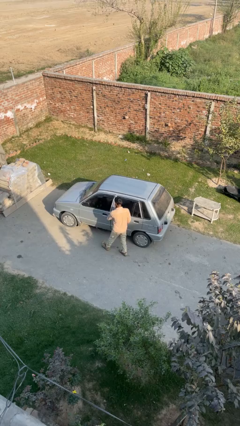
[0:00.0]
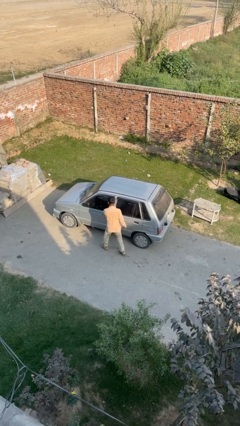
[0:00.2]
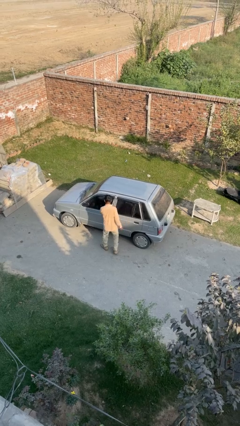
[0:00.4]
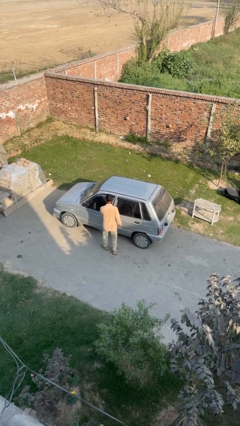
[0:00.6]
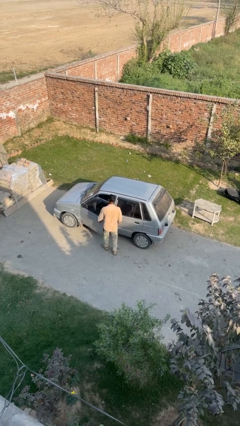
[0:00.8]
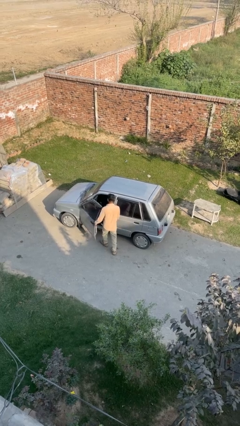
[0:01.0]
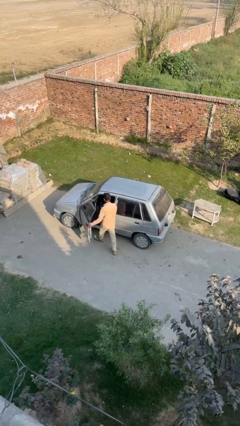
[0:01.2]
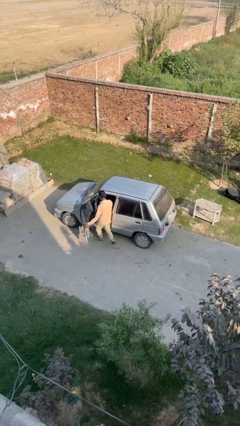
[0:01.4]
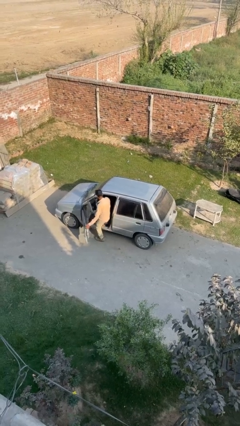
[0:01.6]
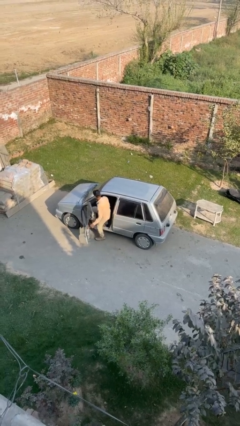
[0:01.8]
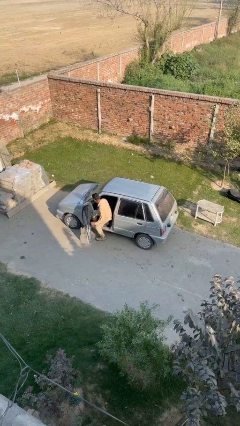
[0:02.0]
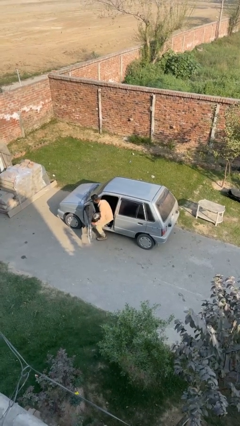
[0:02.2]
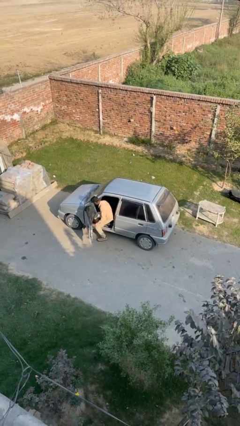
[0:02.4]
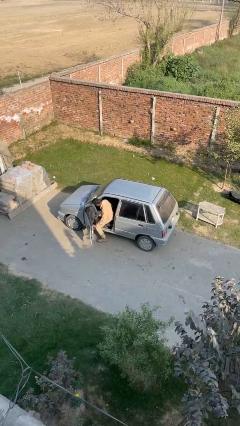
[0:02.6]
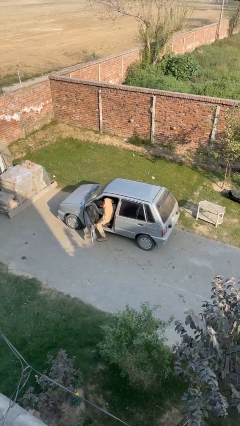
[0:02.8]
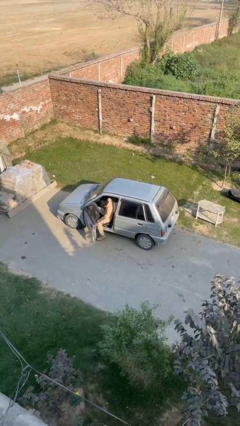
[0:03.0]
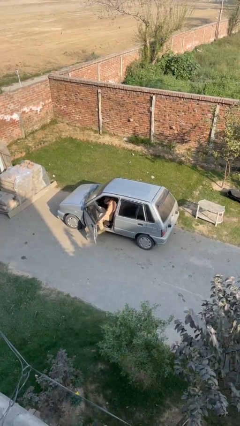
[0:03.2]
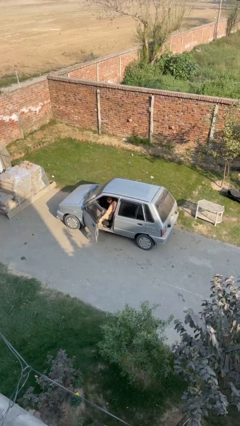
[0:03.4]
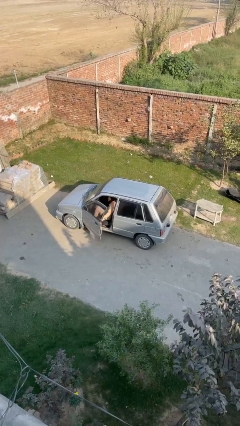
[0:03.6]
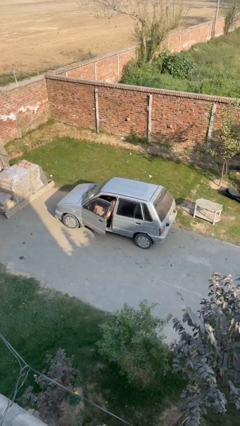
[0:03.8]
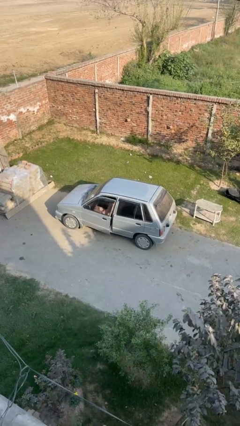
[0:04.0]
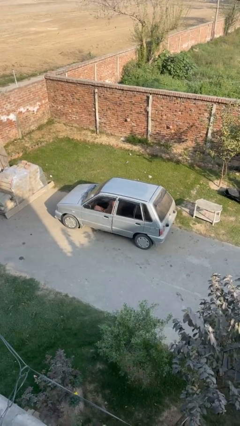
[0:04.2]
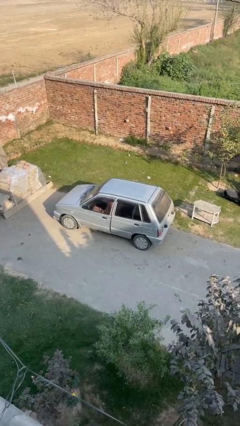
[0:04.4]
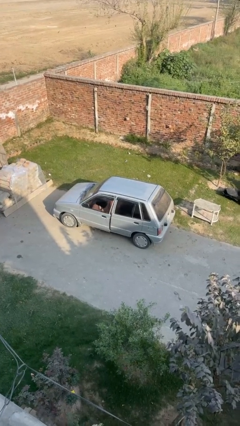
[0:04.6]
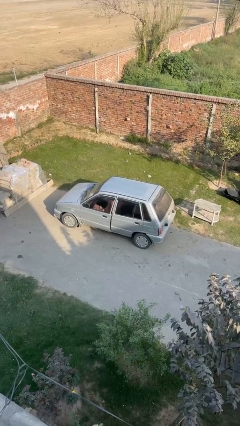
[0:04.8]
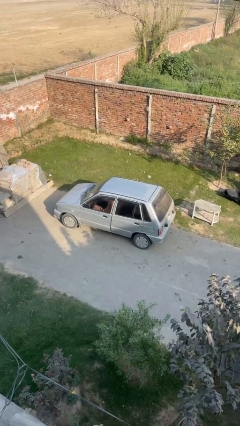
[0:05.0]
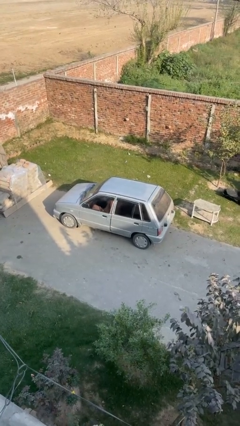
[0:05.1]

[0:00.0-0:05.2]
car picks up person

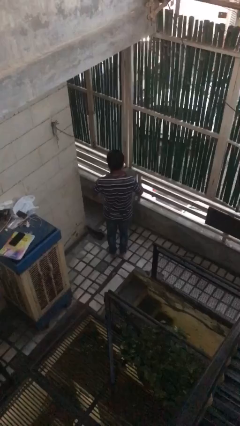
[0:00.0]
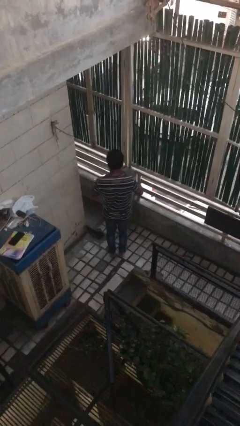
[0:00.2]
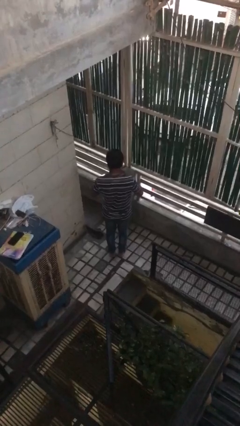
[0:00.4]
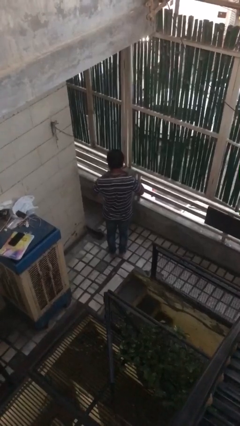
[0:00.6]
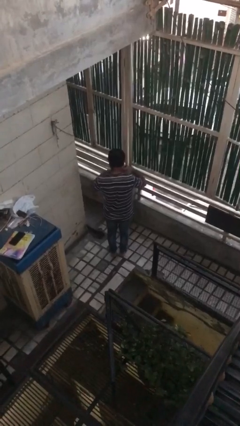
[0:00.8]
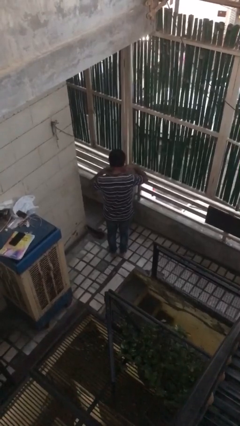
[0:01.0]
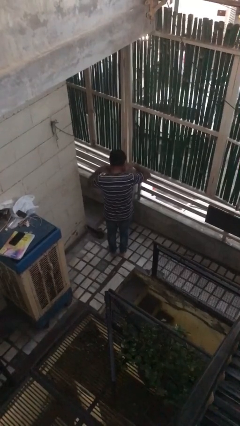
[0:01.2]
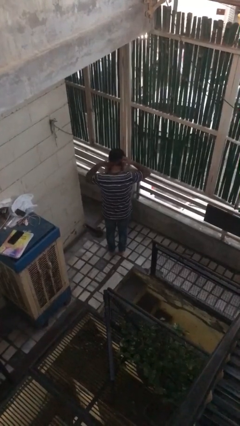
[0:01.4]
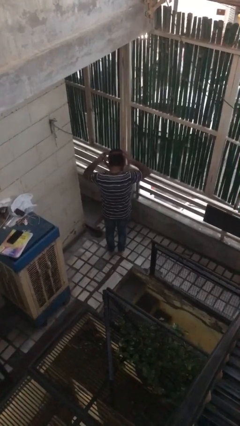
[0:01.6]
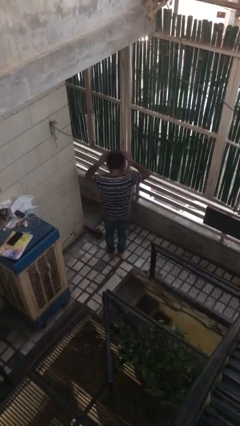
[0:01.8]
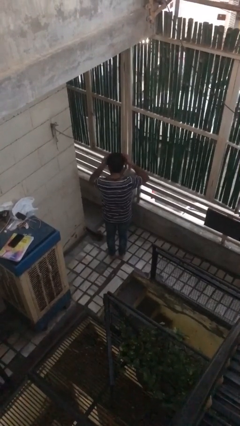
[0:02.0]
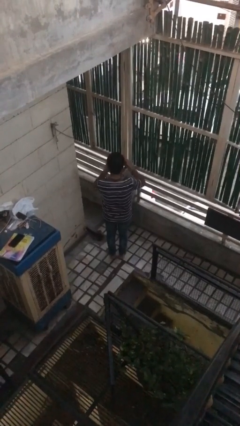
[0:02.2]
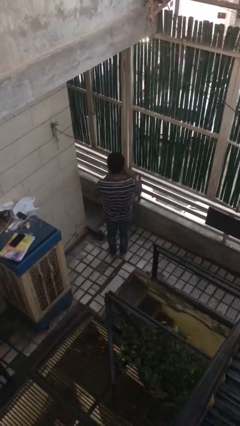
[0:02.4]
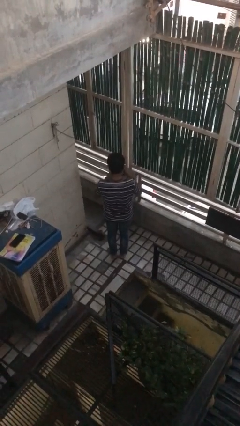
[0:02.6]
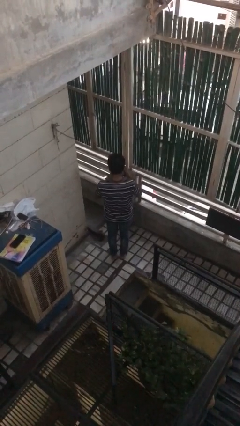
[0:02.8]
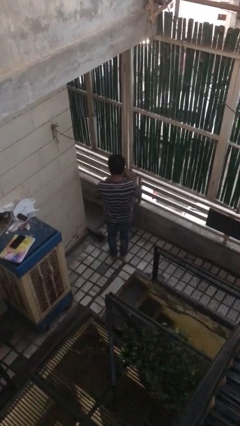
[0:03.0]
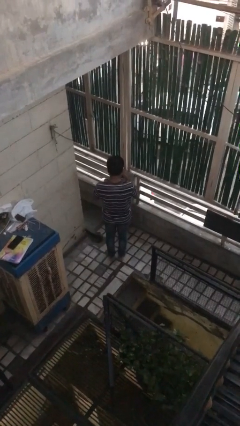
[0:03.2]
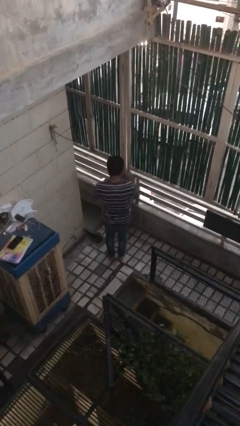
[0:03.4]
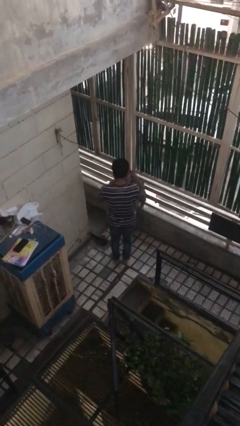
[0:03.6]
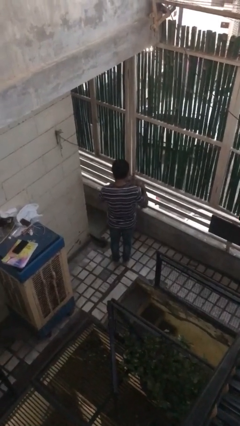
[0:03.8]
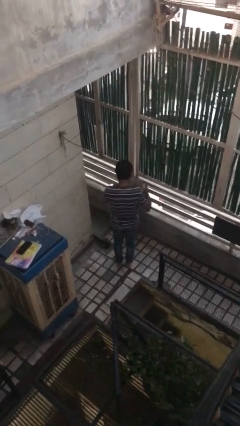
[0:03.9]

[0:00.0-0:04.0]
person takes off necktie

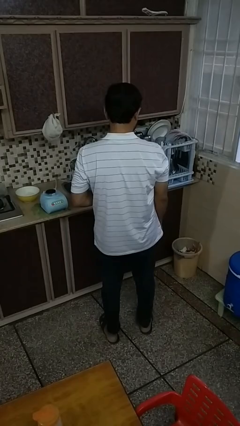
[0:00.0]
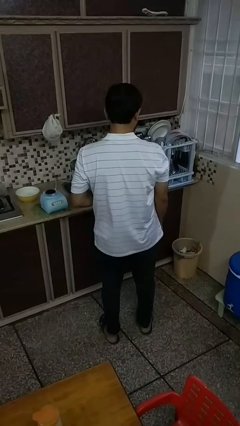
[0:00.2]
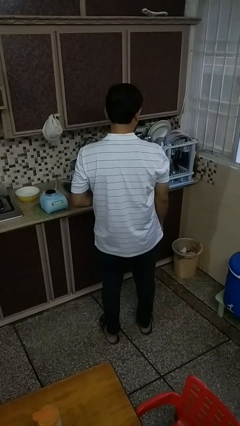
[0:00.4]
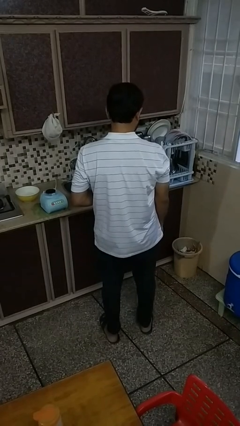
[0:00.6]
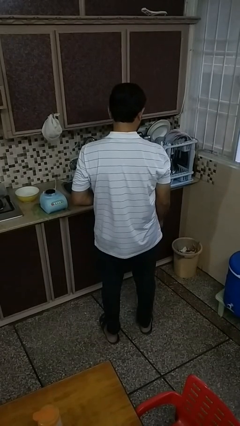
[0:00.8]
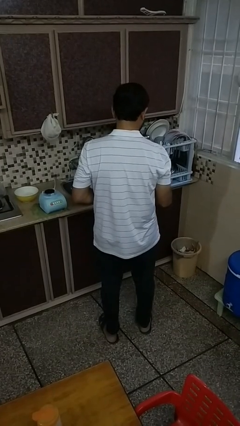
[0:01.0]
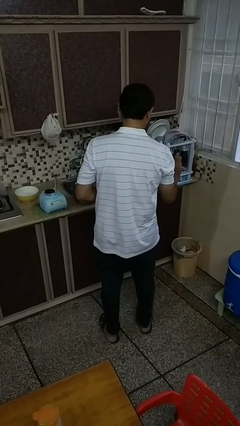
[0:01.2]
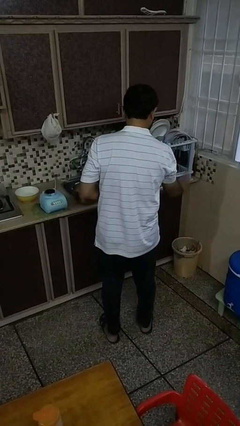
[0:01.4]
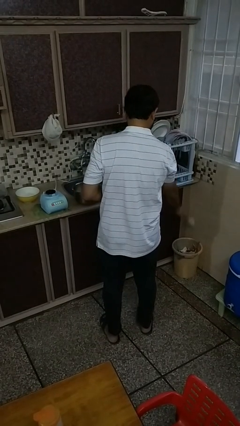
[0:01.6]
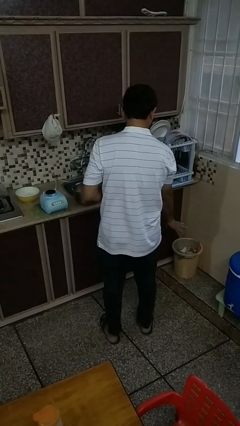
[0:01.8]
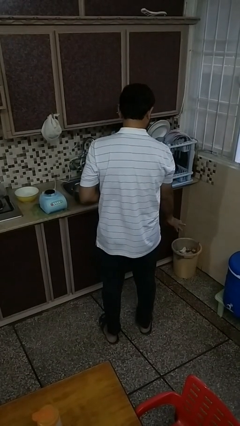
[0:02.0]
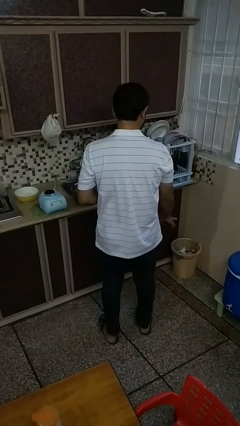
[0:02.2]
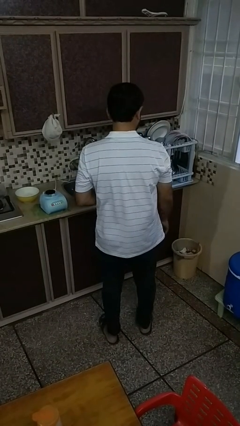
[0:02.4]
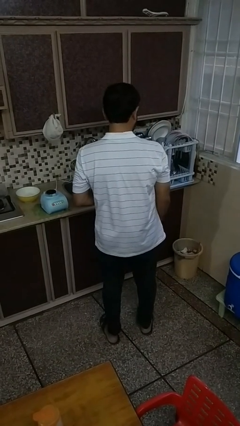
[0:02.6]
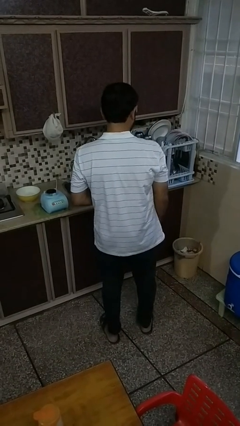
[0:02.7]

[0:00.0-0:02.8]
person discards trash

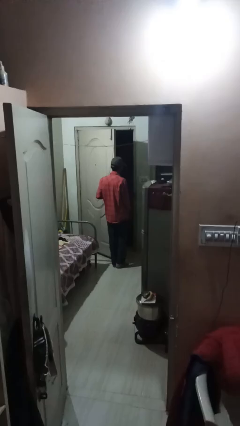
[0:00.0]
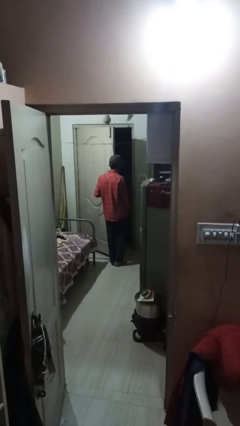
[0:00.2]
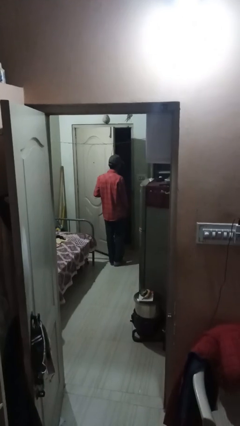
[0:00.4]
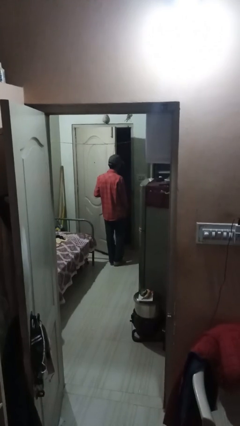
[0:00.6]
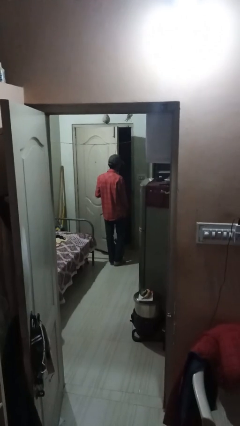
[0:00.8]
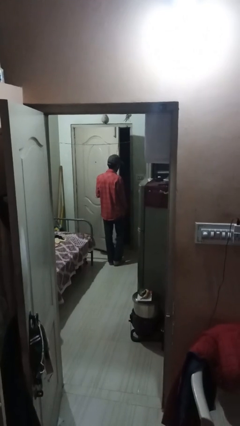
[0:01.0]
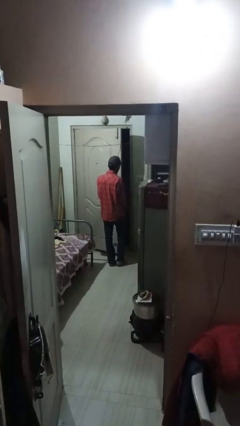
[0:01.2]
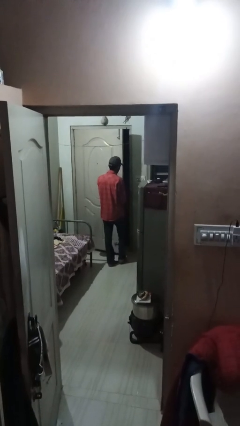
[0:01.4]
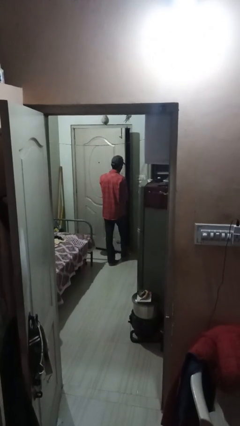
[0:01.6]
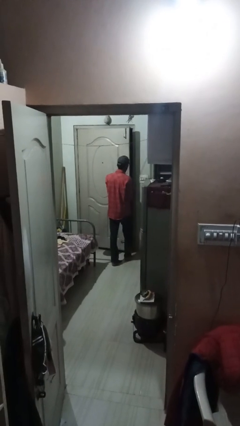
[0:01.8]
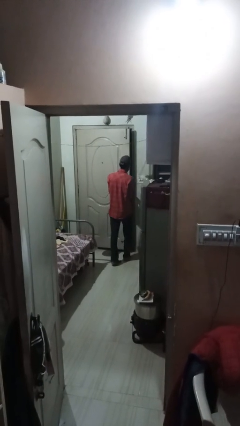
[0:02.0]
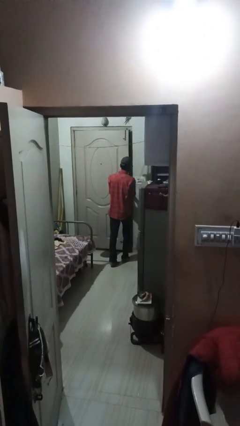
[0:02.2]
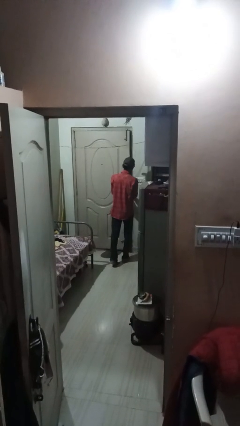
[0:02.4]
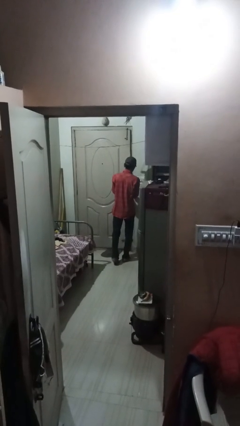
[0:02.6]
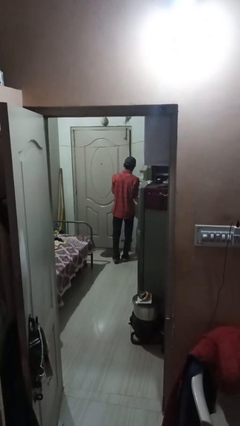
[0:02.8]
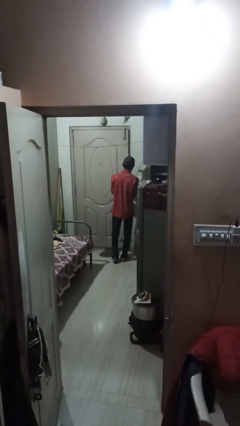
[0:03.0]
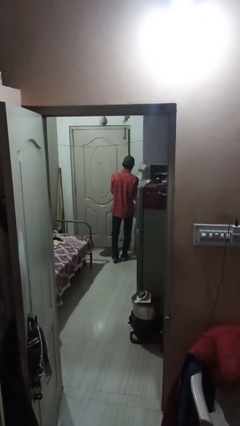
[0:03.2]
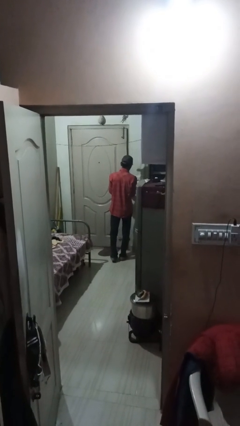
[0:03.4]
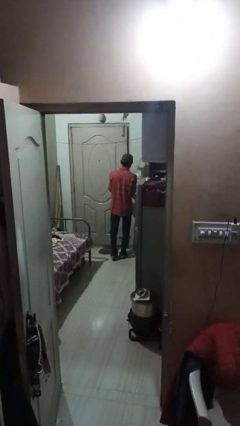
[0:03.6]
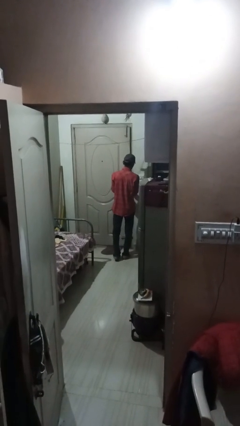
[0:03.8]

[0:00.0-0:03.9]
person closes facility door

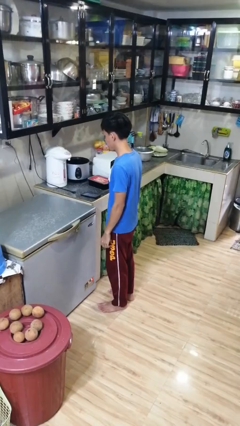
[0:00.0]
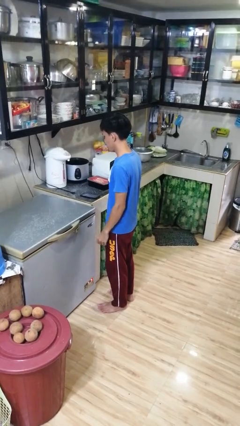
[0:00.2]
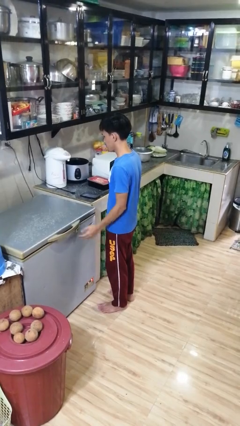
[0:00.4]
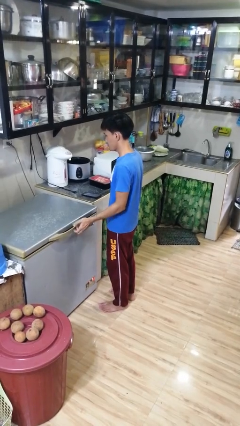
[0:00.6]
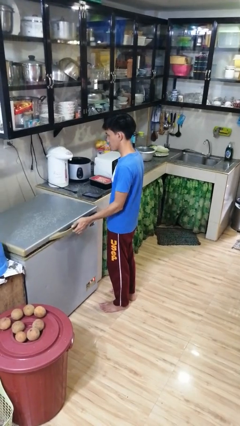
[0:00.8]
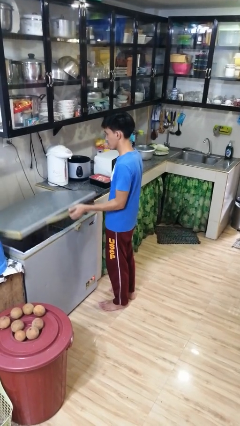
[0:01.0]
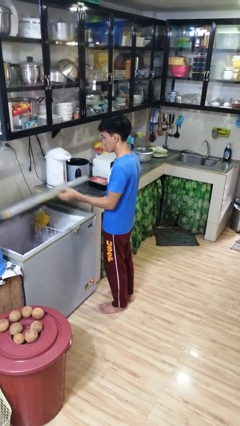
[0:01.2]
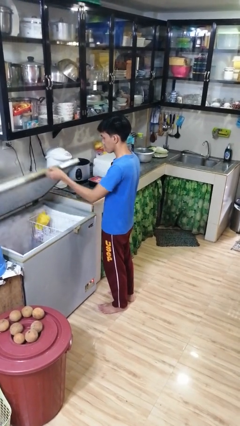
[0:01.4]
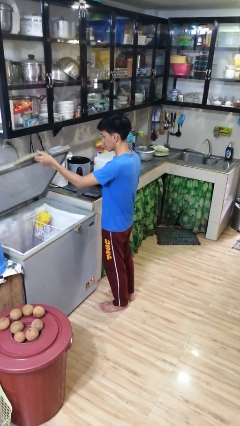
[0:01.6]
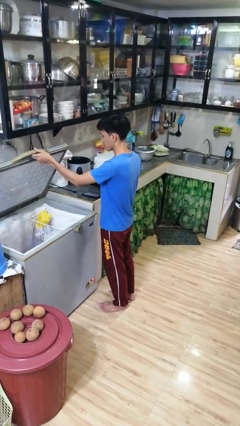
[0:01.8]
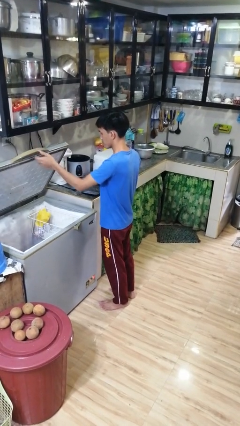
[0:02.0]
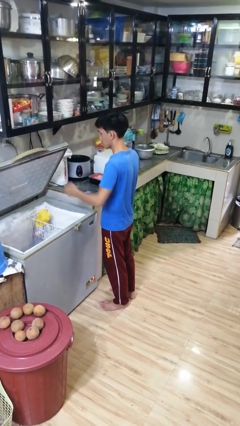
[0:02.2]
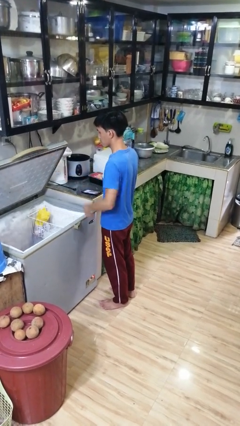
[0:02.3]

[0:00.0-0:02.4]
person opens refrigerator
